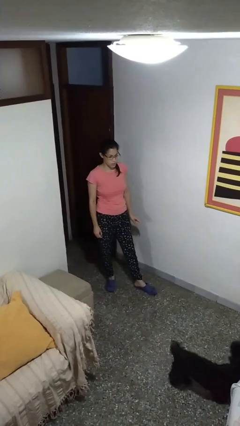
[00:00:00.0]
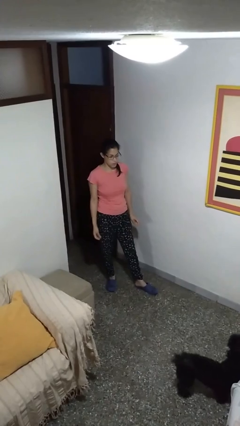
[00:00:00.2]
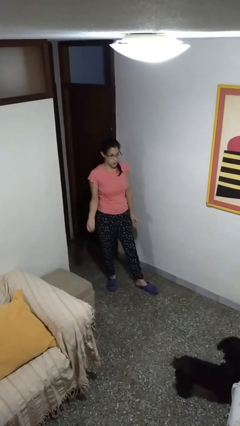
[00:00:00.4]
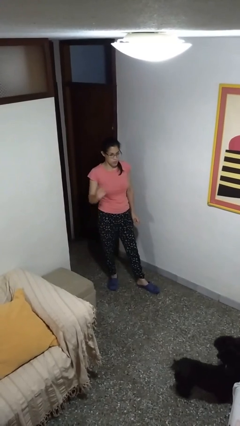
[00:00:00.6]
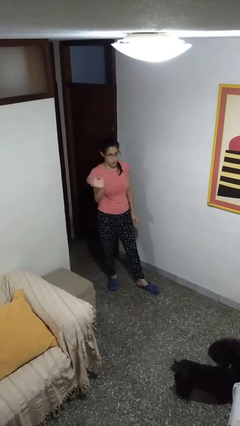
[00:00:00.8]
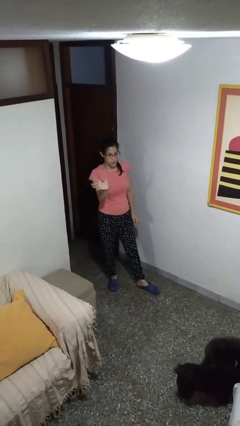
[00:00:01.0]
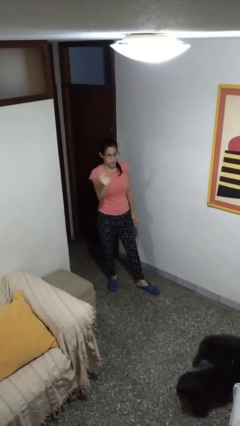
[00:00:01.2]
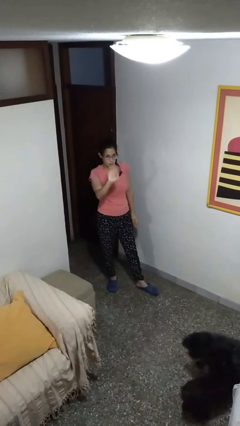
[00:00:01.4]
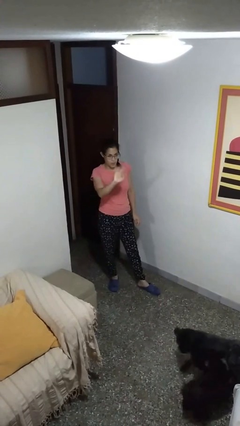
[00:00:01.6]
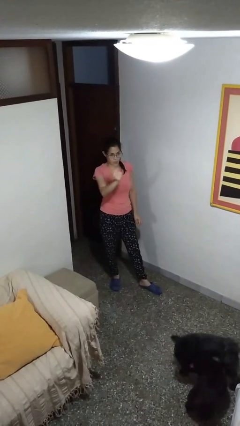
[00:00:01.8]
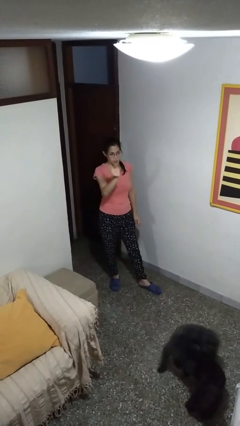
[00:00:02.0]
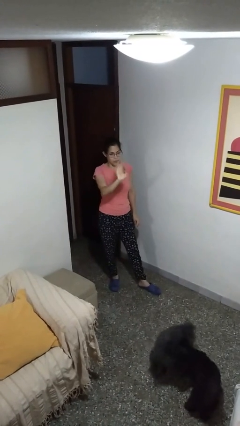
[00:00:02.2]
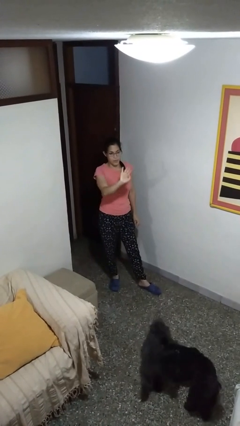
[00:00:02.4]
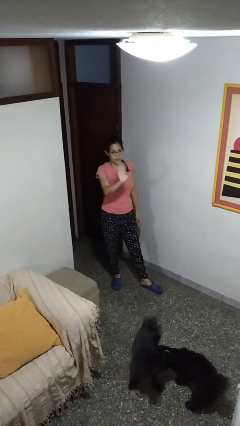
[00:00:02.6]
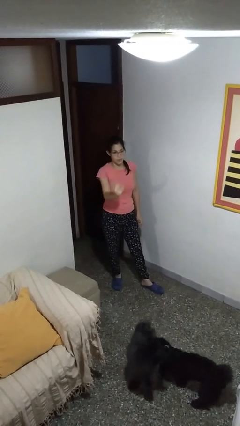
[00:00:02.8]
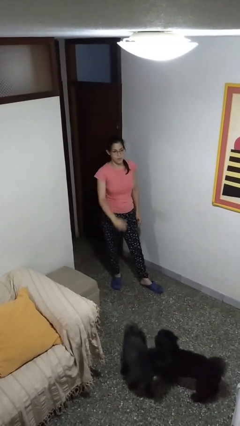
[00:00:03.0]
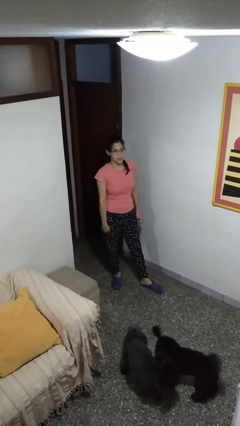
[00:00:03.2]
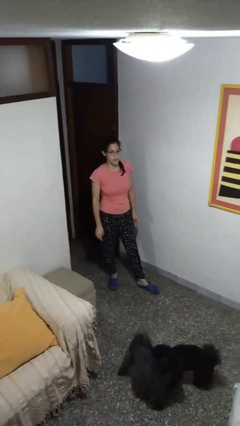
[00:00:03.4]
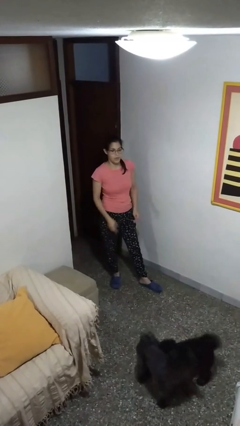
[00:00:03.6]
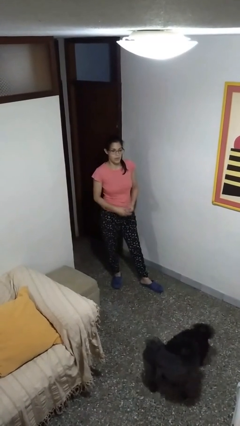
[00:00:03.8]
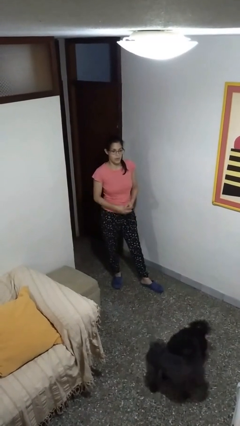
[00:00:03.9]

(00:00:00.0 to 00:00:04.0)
person waves at person

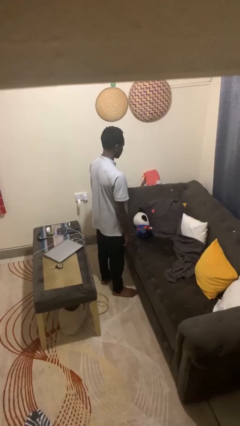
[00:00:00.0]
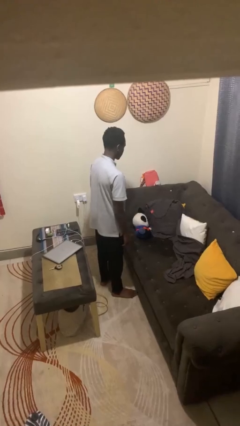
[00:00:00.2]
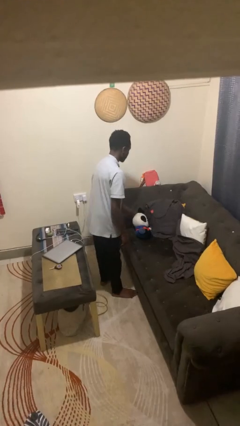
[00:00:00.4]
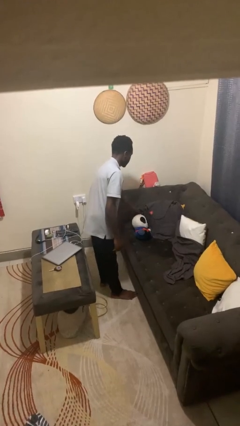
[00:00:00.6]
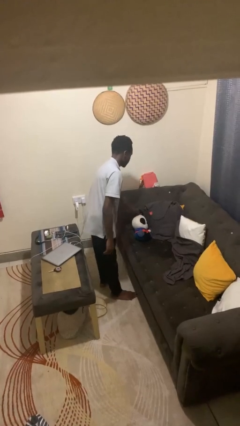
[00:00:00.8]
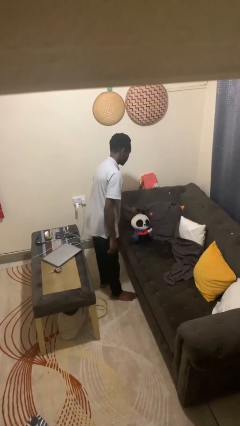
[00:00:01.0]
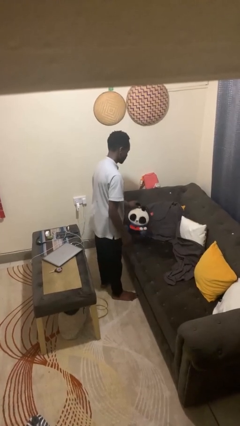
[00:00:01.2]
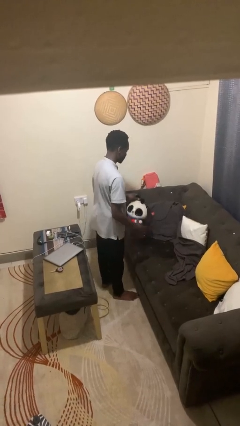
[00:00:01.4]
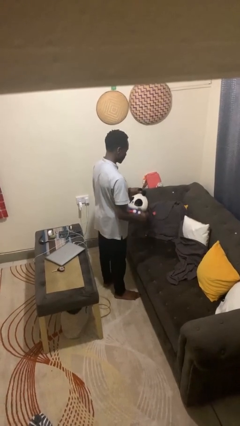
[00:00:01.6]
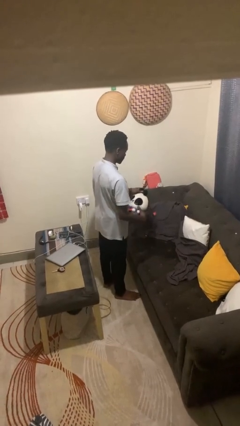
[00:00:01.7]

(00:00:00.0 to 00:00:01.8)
person picks up object from couch

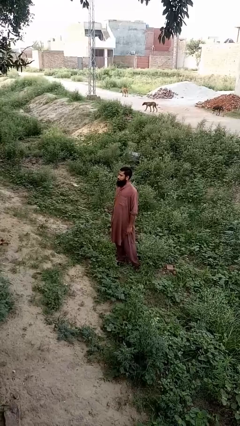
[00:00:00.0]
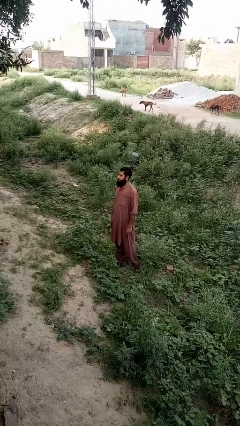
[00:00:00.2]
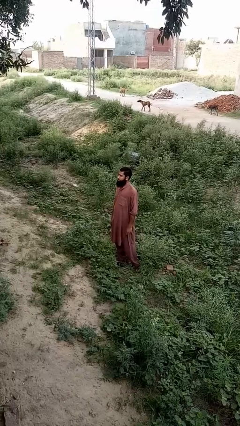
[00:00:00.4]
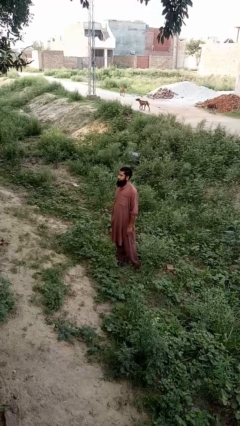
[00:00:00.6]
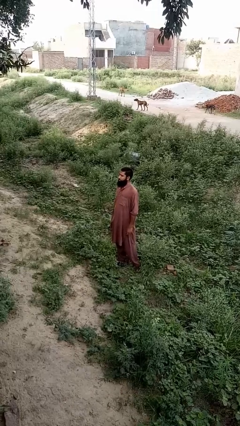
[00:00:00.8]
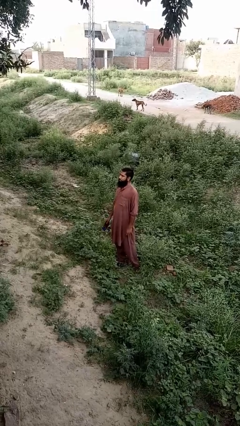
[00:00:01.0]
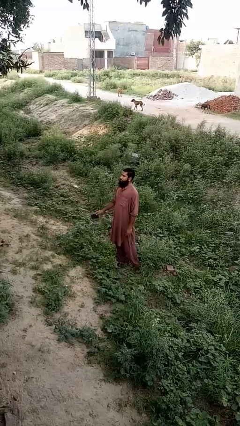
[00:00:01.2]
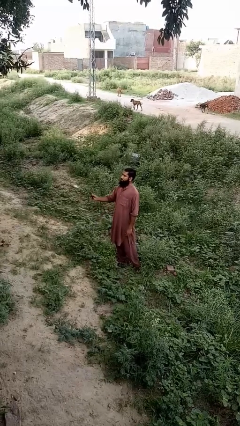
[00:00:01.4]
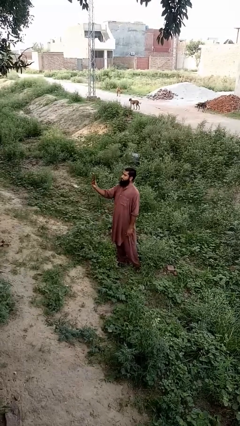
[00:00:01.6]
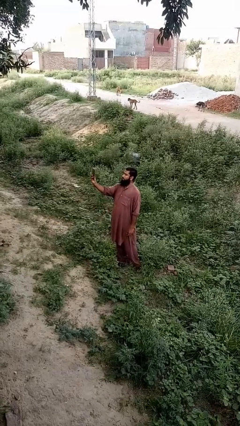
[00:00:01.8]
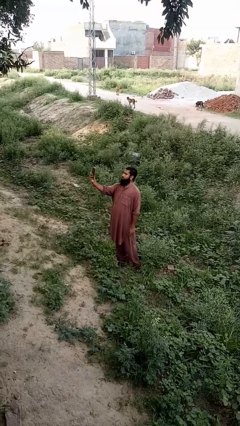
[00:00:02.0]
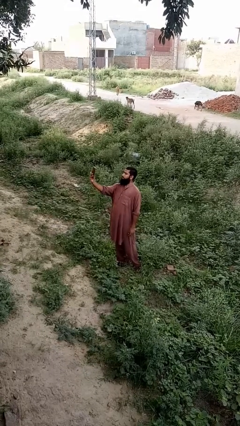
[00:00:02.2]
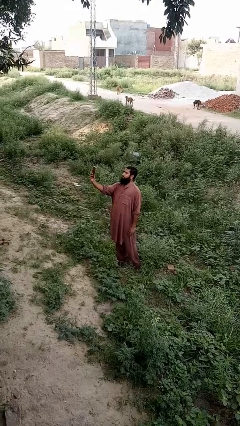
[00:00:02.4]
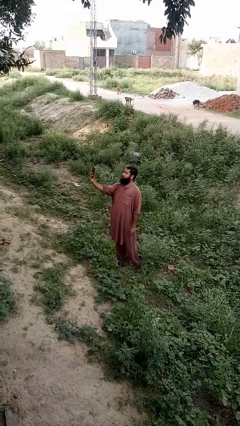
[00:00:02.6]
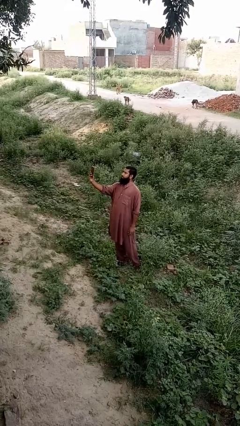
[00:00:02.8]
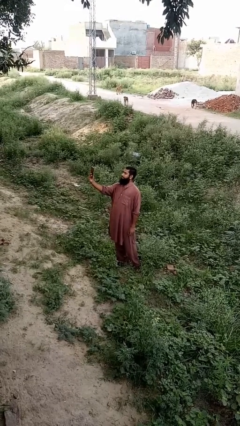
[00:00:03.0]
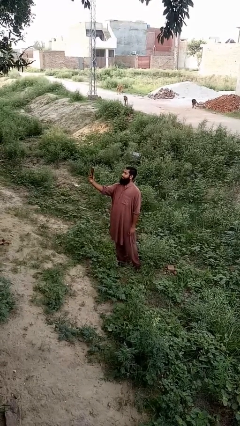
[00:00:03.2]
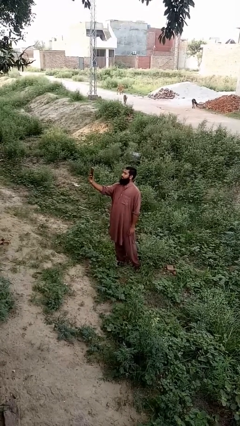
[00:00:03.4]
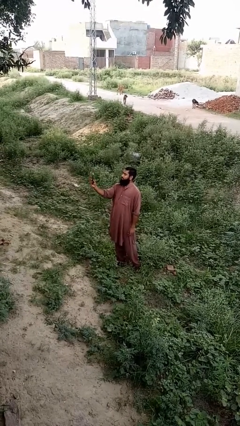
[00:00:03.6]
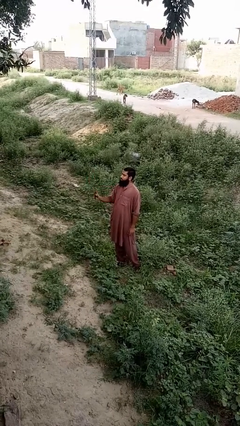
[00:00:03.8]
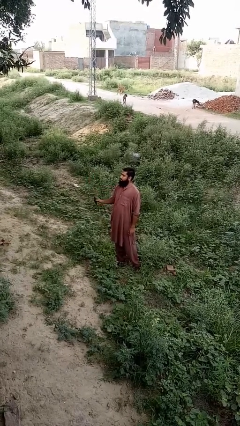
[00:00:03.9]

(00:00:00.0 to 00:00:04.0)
person takes selfie

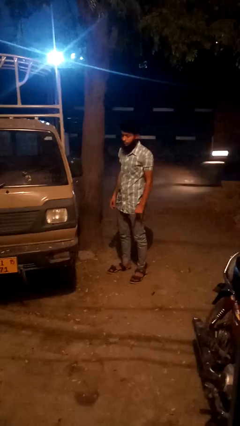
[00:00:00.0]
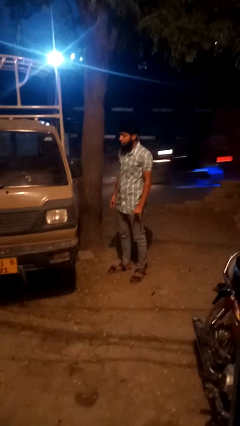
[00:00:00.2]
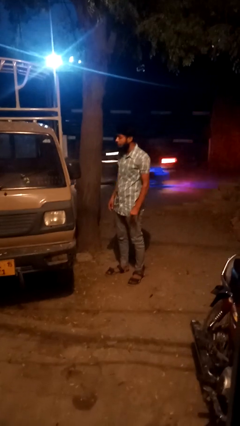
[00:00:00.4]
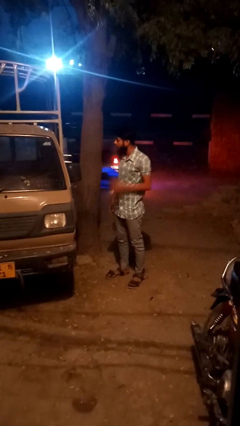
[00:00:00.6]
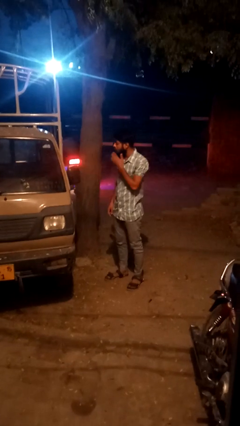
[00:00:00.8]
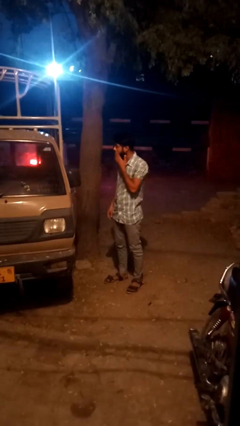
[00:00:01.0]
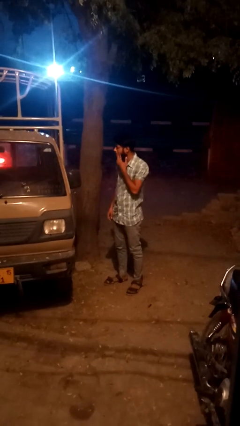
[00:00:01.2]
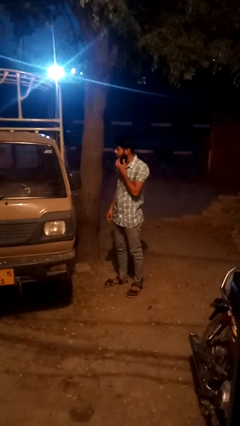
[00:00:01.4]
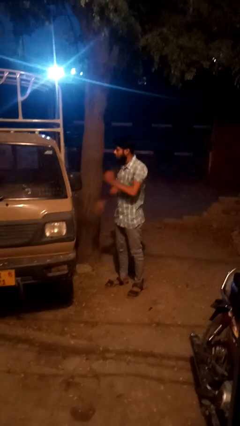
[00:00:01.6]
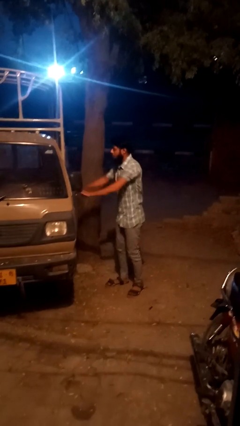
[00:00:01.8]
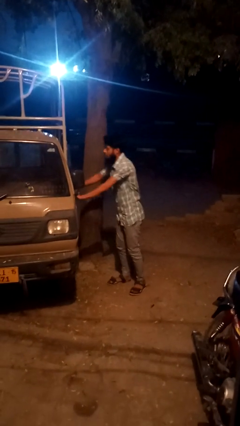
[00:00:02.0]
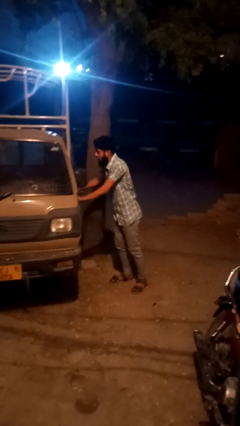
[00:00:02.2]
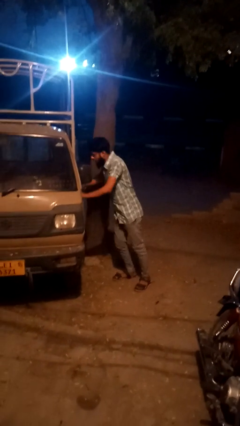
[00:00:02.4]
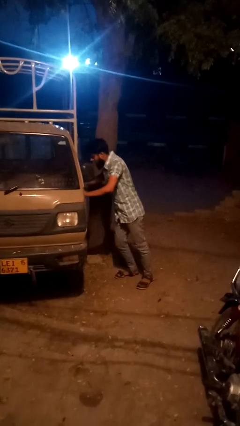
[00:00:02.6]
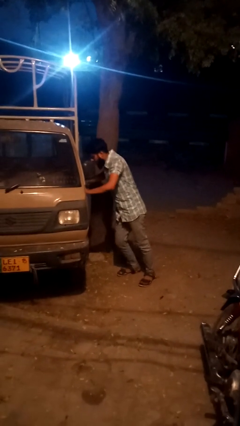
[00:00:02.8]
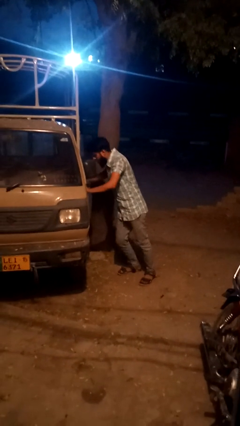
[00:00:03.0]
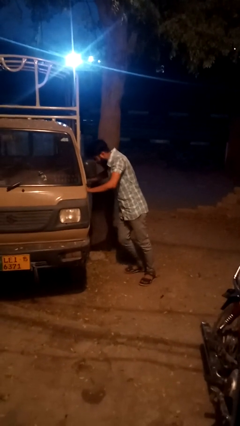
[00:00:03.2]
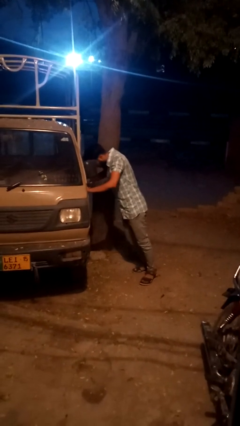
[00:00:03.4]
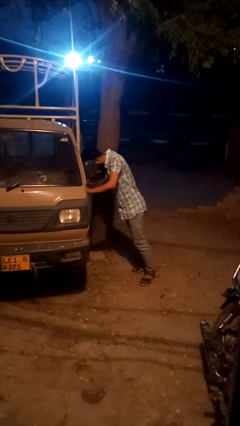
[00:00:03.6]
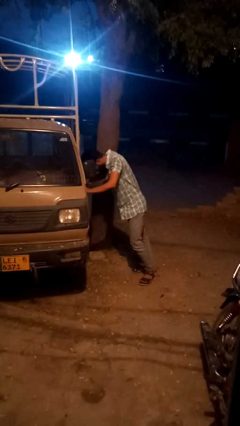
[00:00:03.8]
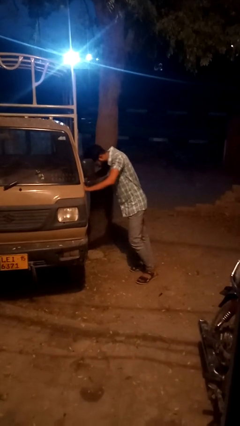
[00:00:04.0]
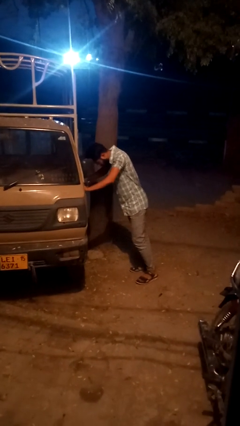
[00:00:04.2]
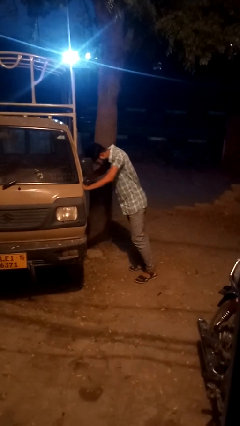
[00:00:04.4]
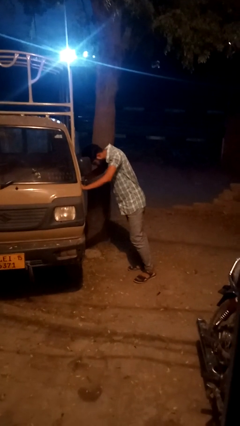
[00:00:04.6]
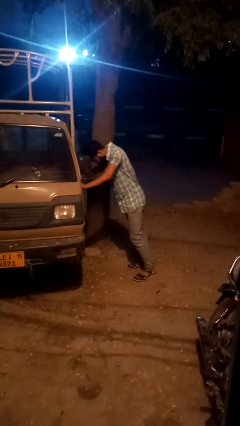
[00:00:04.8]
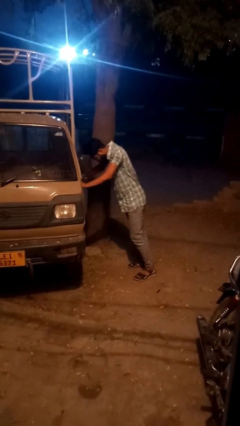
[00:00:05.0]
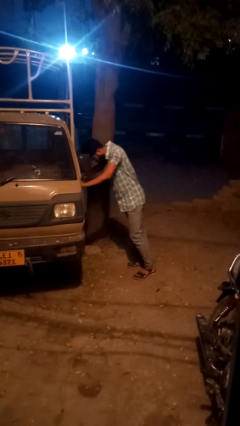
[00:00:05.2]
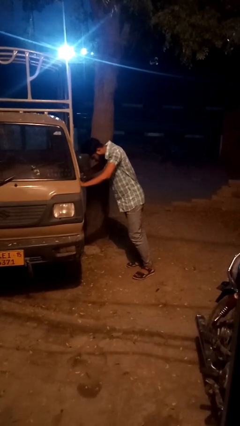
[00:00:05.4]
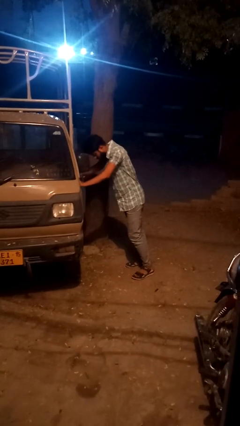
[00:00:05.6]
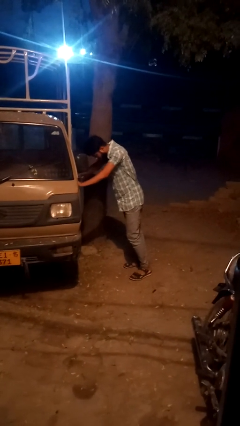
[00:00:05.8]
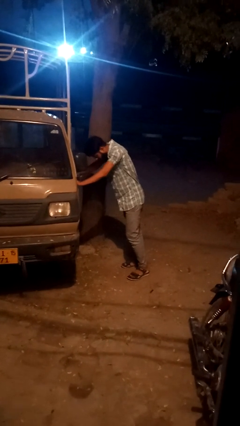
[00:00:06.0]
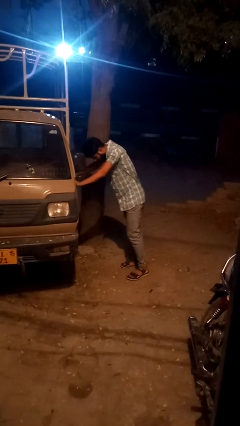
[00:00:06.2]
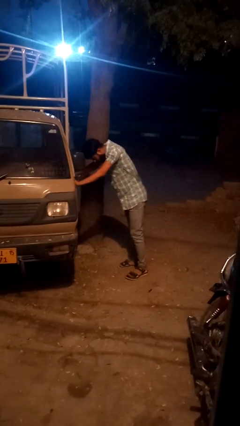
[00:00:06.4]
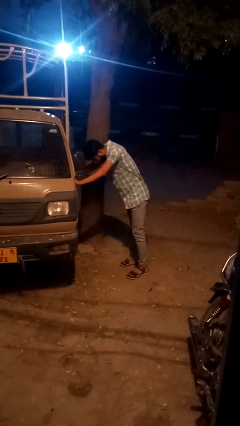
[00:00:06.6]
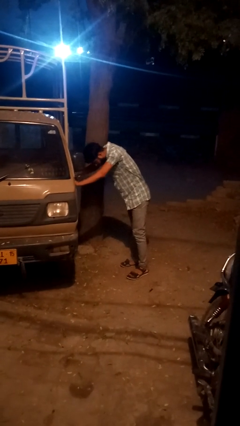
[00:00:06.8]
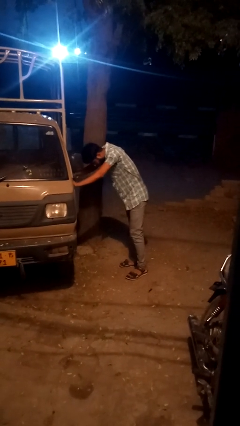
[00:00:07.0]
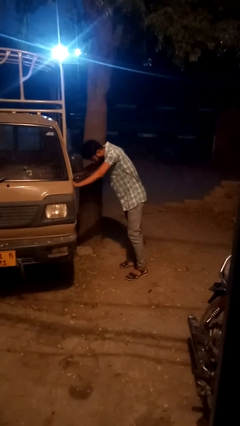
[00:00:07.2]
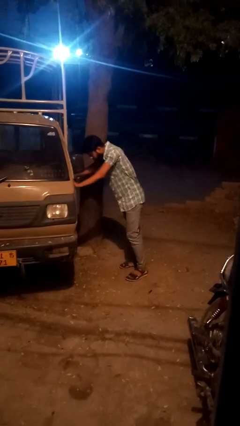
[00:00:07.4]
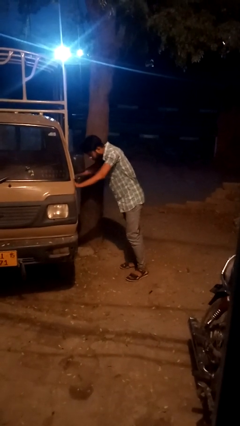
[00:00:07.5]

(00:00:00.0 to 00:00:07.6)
person leans against car
